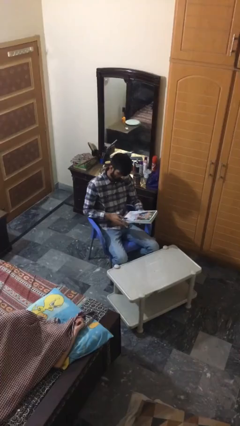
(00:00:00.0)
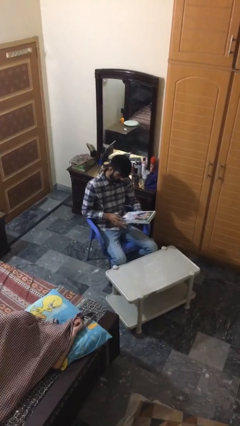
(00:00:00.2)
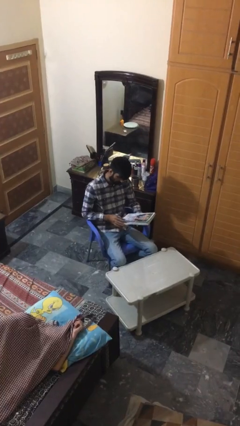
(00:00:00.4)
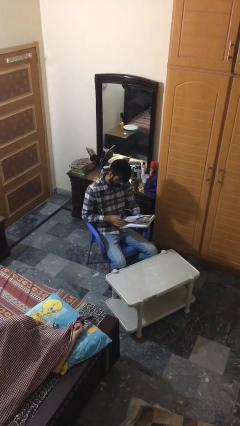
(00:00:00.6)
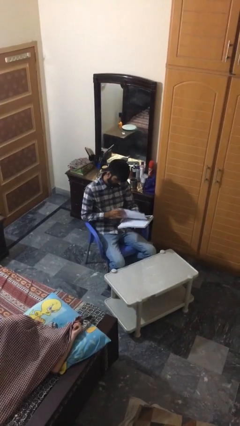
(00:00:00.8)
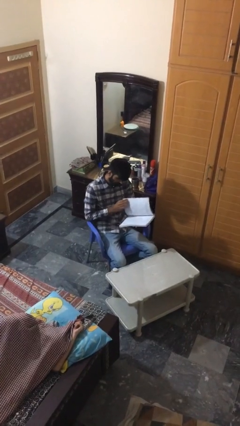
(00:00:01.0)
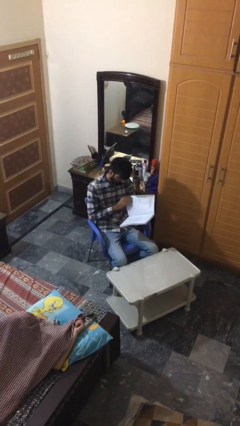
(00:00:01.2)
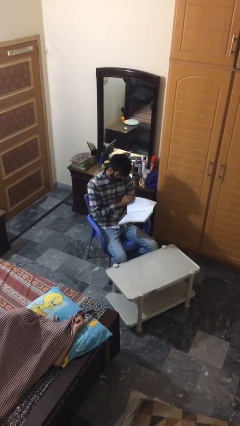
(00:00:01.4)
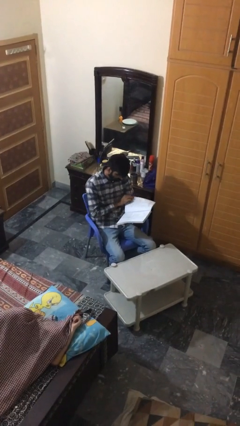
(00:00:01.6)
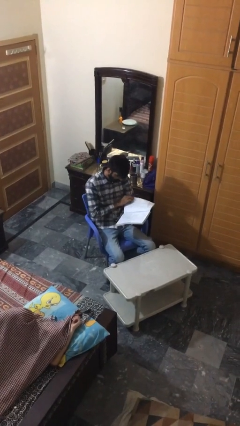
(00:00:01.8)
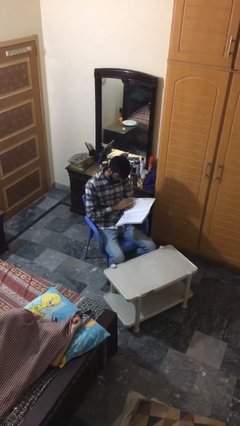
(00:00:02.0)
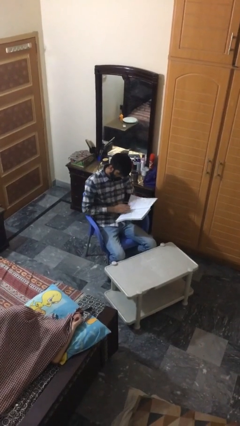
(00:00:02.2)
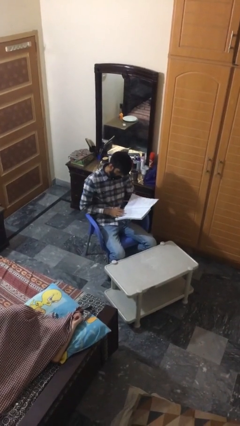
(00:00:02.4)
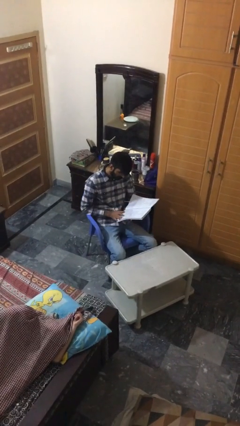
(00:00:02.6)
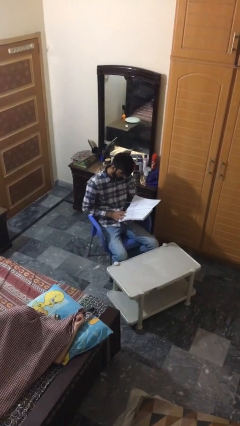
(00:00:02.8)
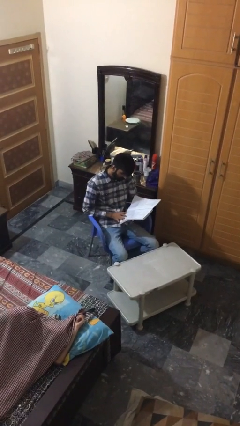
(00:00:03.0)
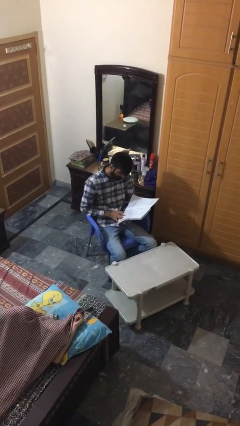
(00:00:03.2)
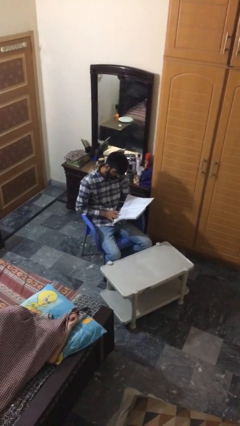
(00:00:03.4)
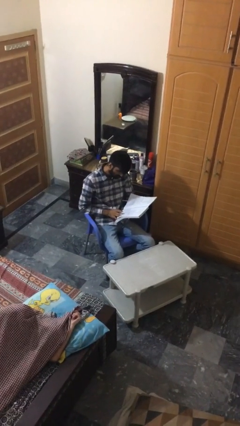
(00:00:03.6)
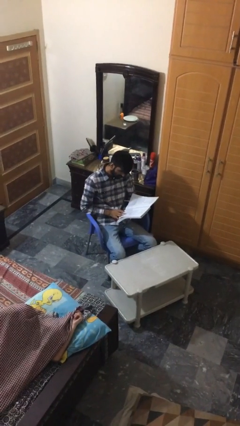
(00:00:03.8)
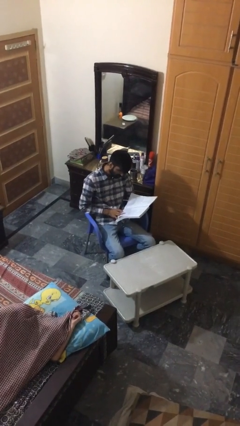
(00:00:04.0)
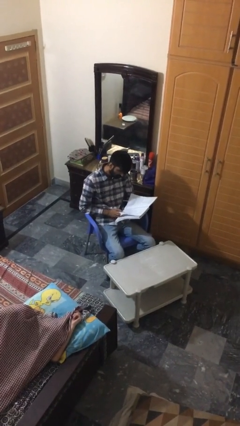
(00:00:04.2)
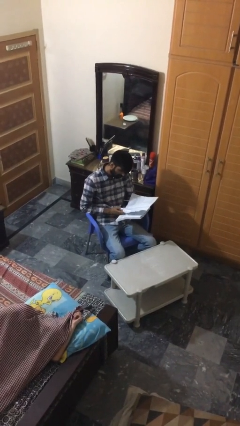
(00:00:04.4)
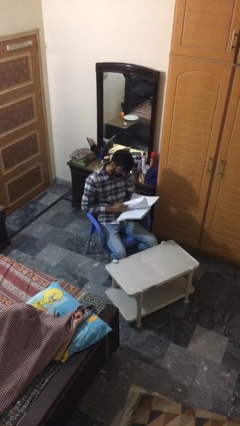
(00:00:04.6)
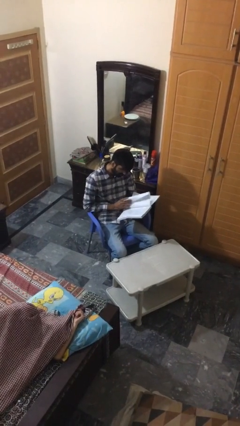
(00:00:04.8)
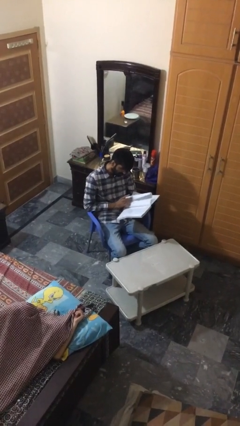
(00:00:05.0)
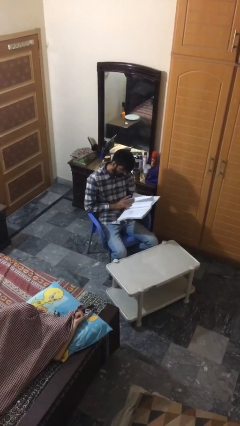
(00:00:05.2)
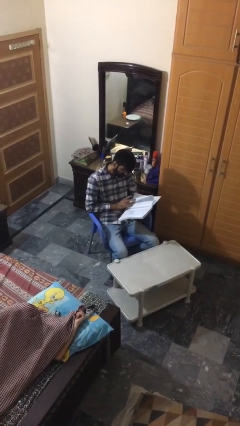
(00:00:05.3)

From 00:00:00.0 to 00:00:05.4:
person reads document

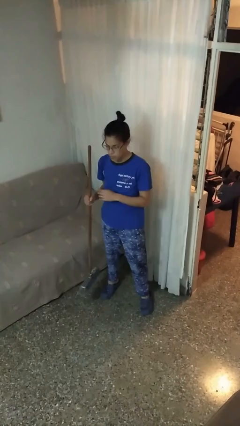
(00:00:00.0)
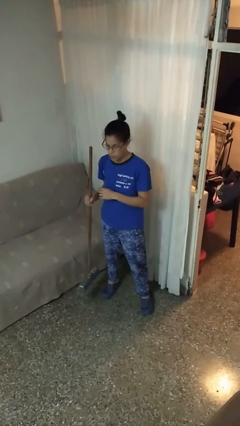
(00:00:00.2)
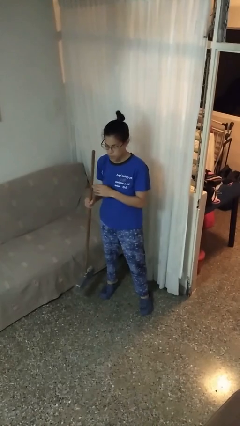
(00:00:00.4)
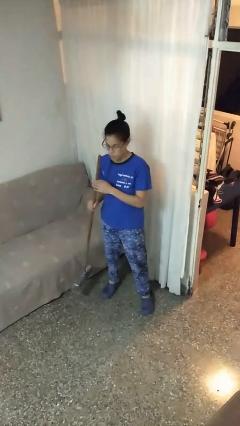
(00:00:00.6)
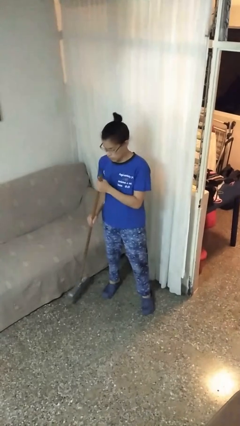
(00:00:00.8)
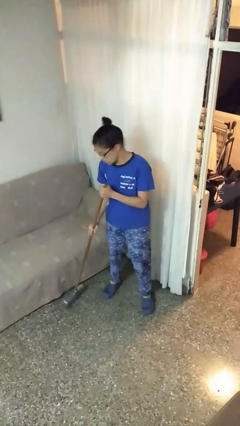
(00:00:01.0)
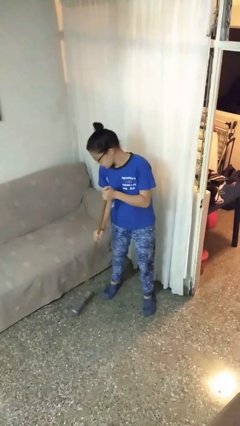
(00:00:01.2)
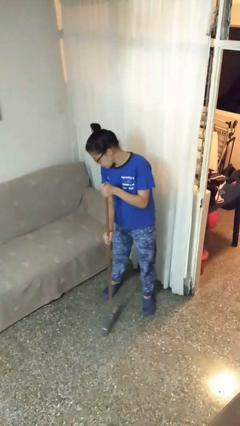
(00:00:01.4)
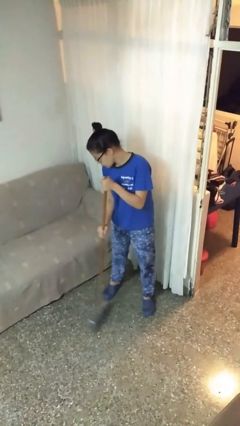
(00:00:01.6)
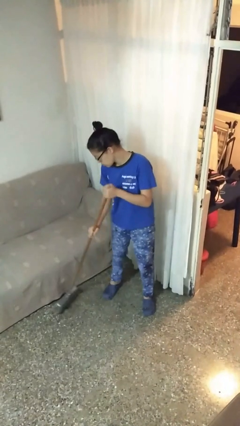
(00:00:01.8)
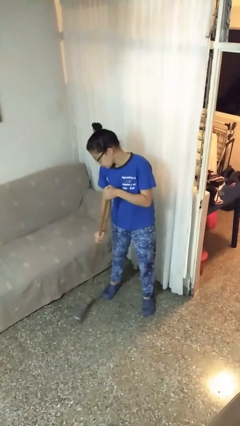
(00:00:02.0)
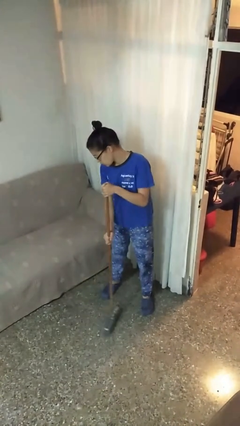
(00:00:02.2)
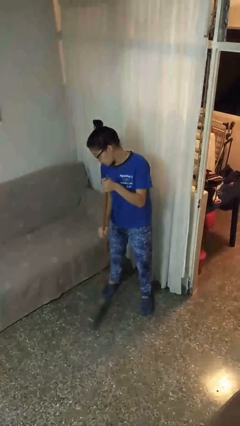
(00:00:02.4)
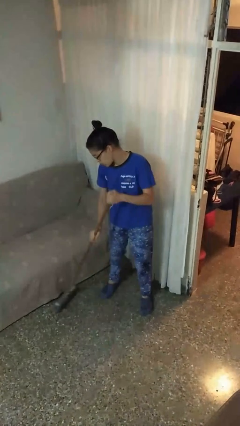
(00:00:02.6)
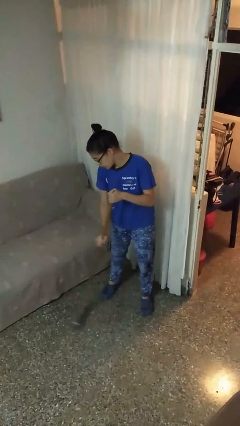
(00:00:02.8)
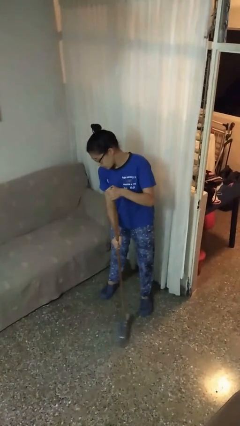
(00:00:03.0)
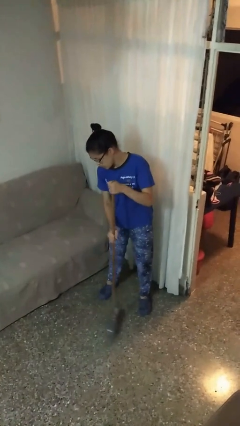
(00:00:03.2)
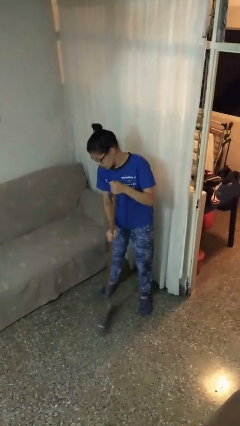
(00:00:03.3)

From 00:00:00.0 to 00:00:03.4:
person sweeps floor

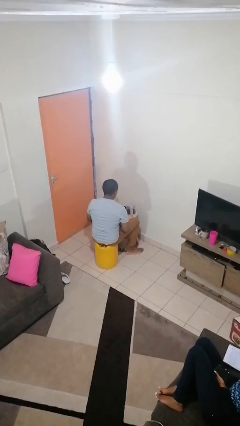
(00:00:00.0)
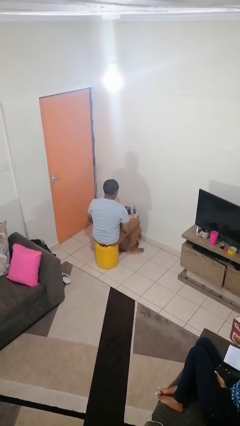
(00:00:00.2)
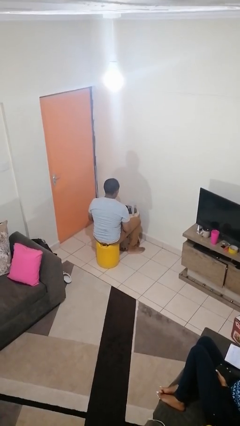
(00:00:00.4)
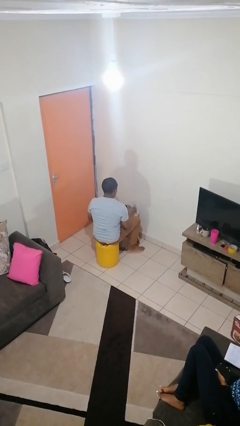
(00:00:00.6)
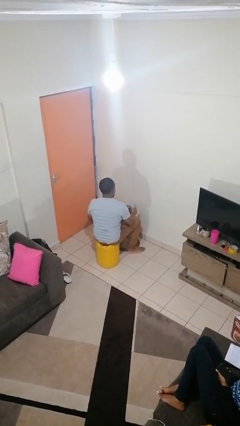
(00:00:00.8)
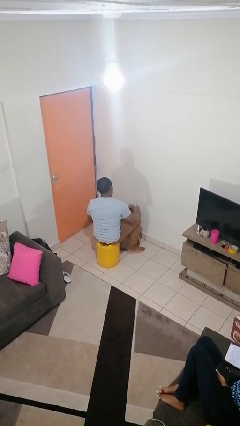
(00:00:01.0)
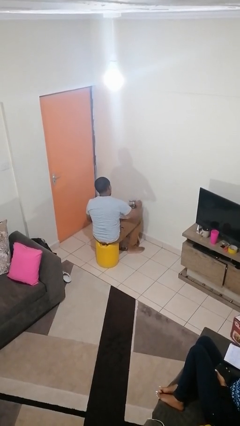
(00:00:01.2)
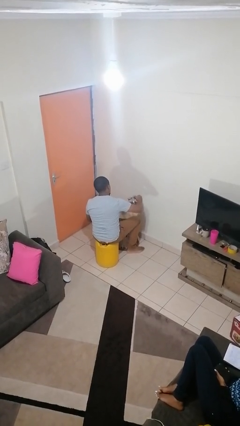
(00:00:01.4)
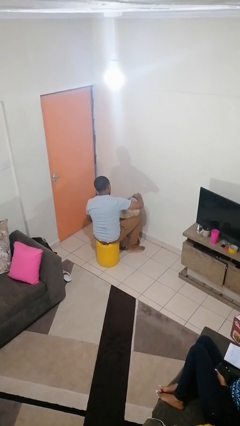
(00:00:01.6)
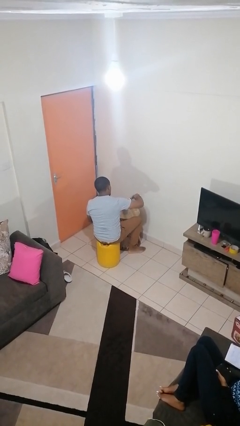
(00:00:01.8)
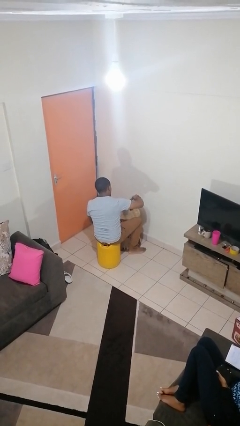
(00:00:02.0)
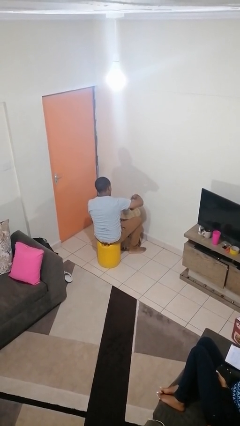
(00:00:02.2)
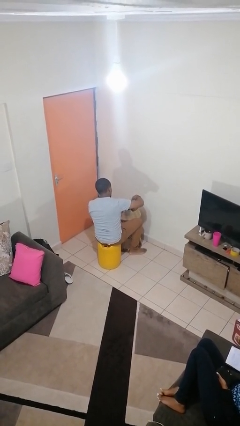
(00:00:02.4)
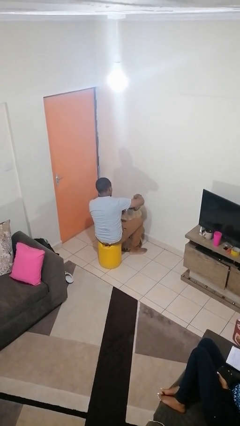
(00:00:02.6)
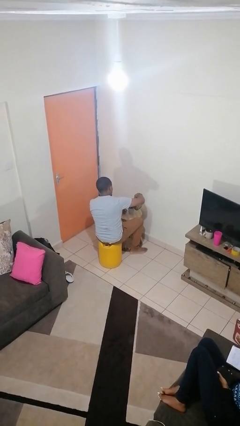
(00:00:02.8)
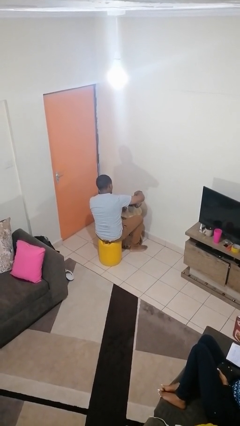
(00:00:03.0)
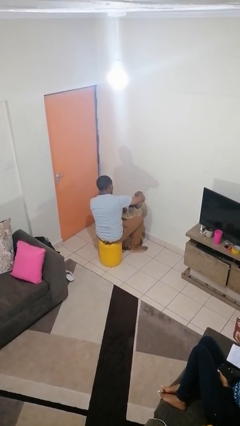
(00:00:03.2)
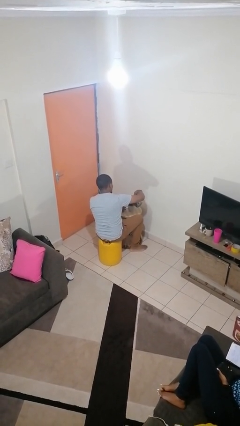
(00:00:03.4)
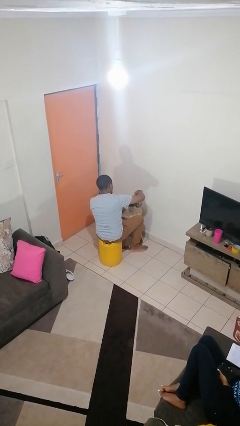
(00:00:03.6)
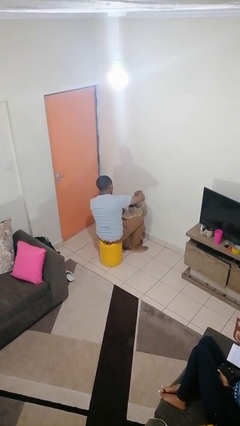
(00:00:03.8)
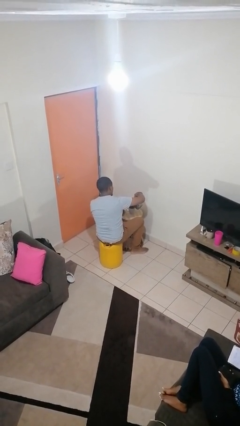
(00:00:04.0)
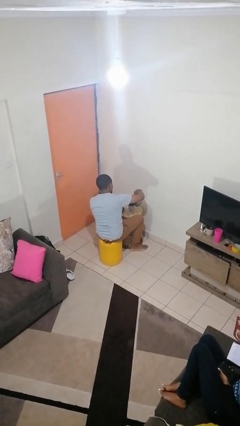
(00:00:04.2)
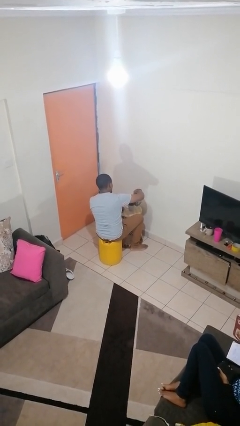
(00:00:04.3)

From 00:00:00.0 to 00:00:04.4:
person pours coffee into mug

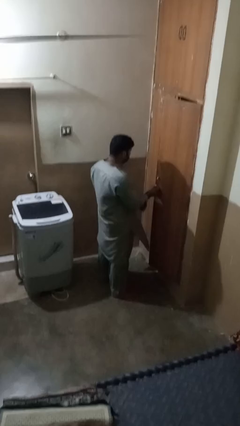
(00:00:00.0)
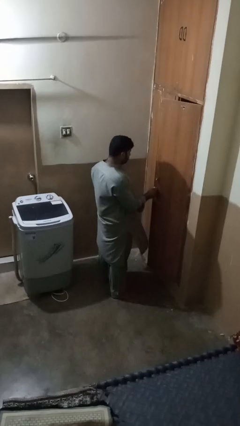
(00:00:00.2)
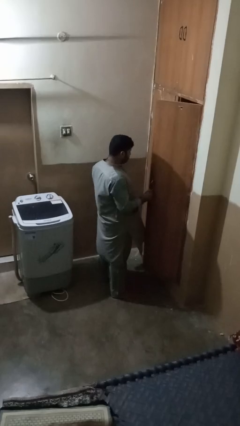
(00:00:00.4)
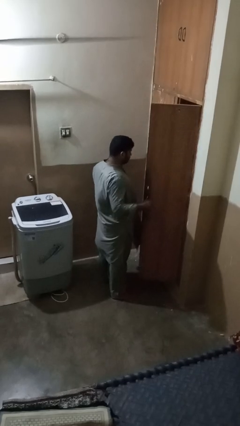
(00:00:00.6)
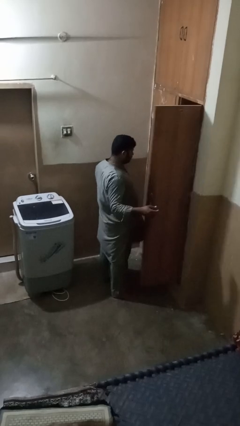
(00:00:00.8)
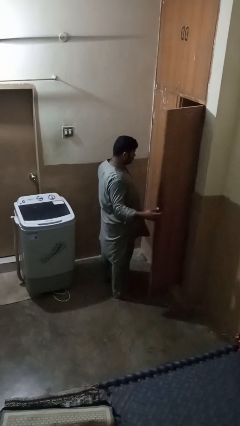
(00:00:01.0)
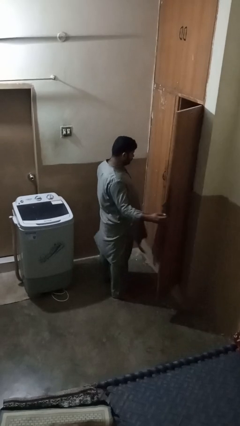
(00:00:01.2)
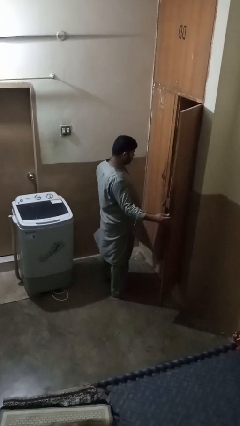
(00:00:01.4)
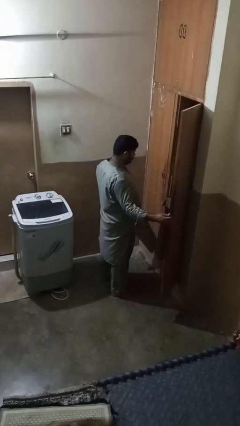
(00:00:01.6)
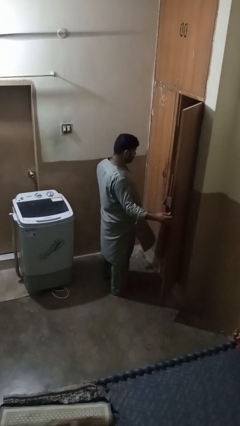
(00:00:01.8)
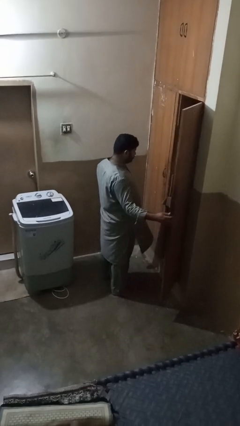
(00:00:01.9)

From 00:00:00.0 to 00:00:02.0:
person opens closet door

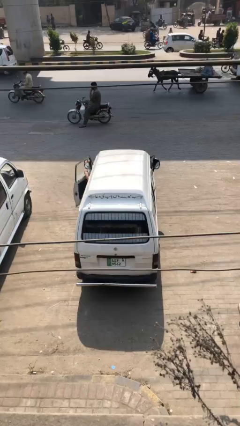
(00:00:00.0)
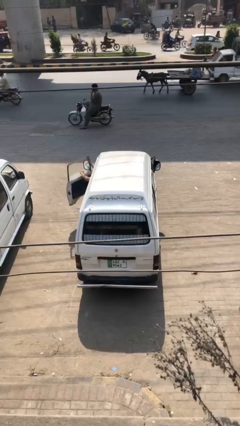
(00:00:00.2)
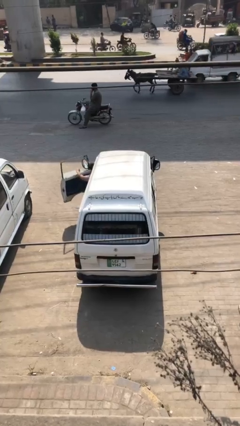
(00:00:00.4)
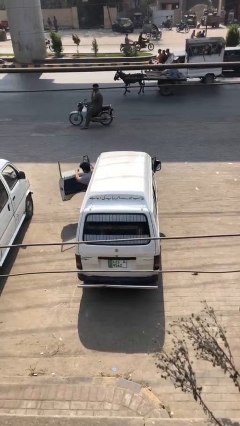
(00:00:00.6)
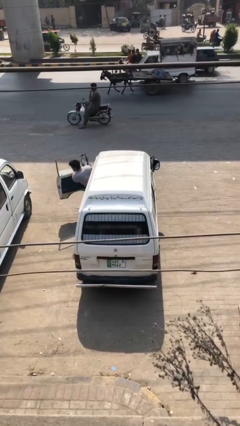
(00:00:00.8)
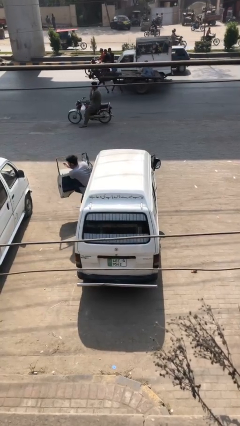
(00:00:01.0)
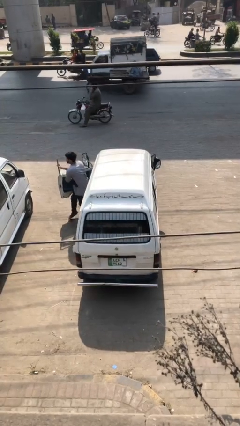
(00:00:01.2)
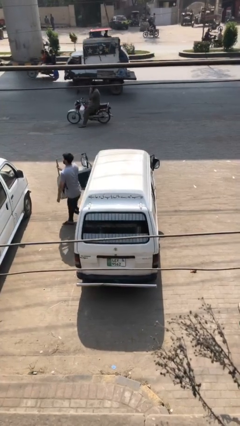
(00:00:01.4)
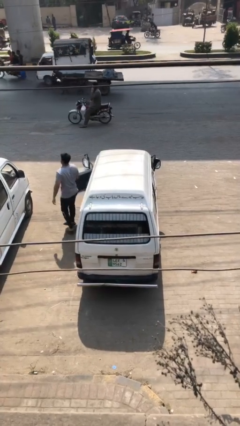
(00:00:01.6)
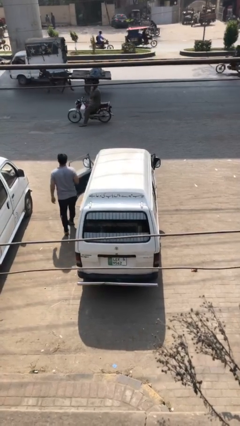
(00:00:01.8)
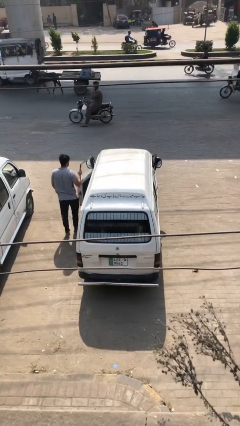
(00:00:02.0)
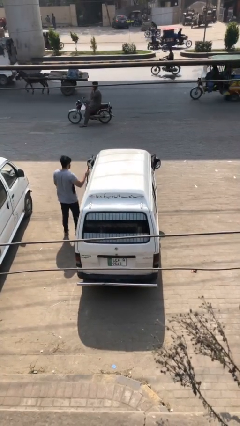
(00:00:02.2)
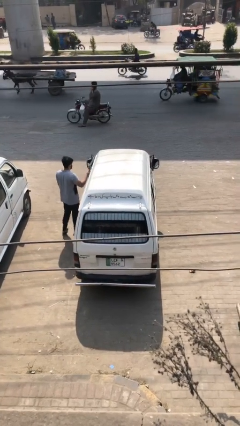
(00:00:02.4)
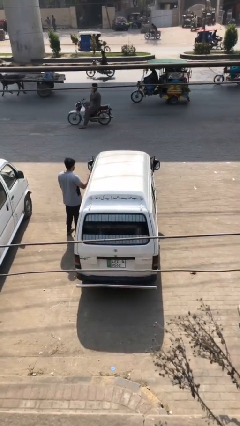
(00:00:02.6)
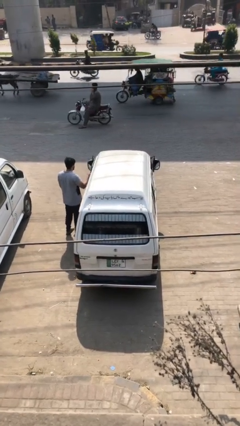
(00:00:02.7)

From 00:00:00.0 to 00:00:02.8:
car drops off person
